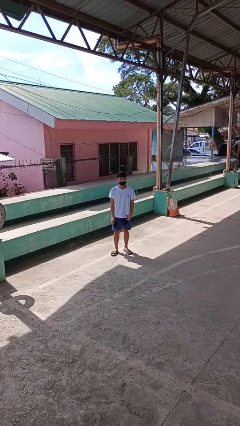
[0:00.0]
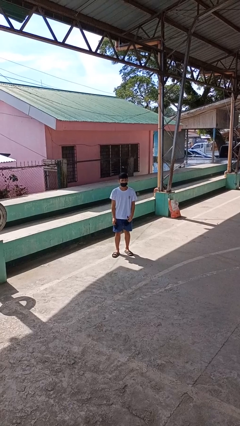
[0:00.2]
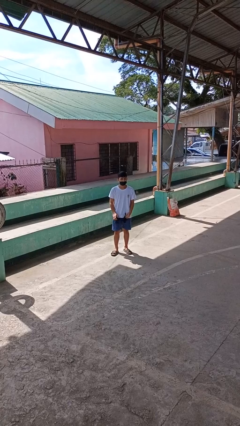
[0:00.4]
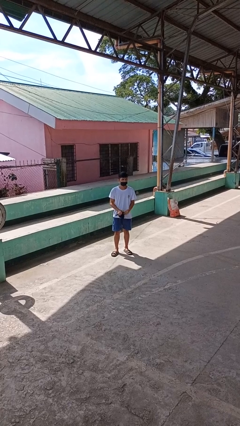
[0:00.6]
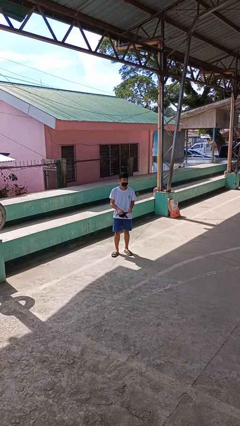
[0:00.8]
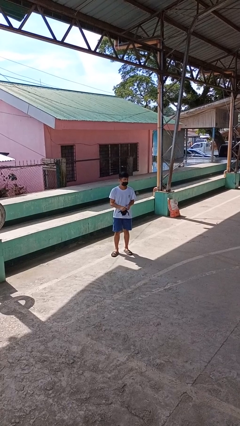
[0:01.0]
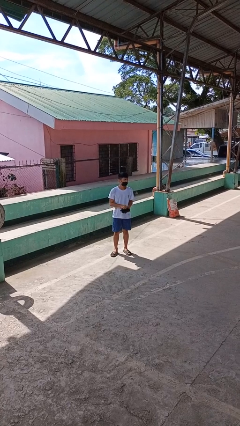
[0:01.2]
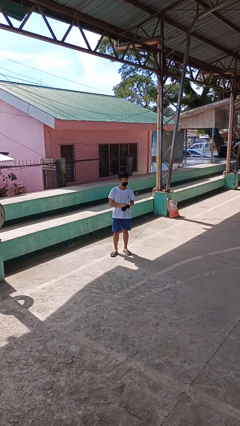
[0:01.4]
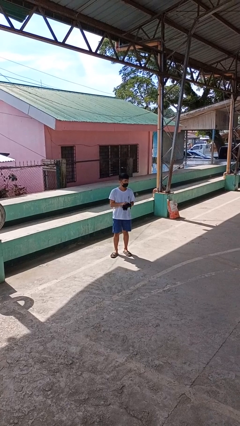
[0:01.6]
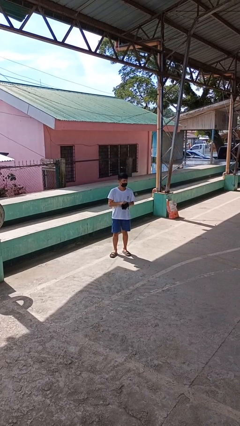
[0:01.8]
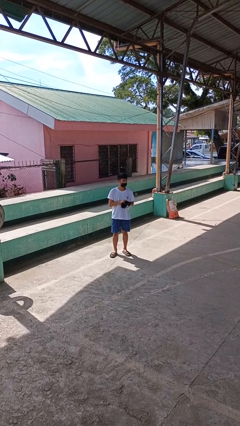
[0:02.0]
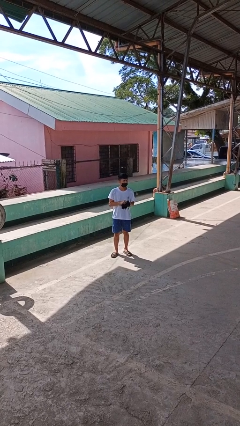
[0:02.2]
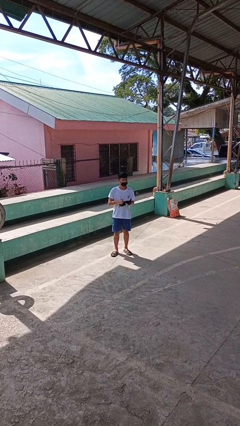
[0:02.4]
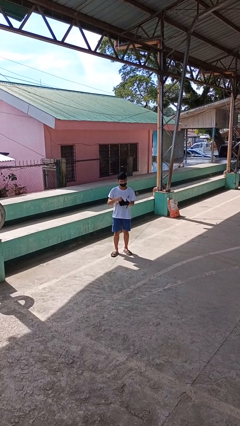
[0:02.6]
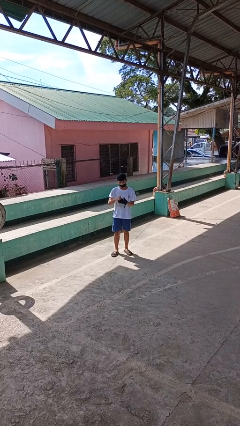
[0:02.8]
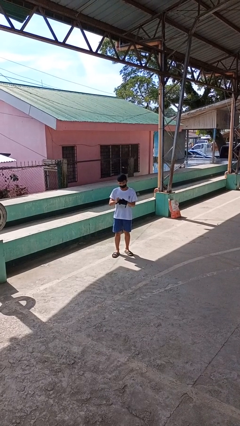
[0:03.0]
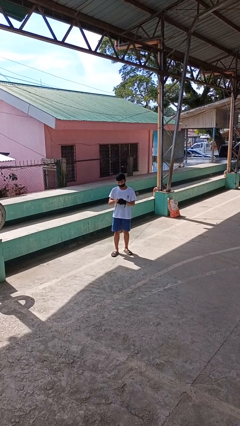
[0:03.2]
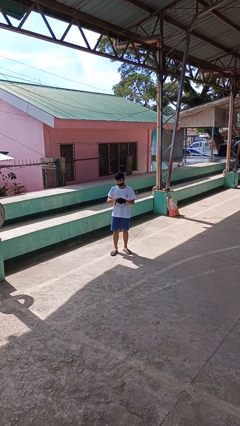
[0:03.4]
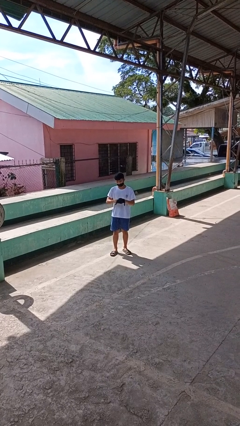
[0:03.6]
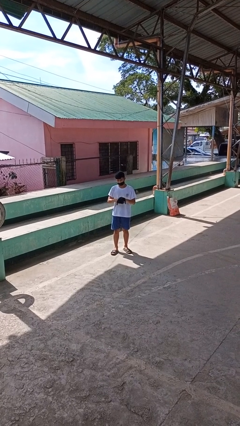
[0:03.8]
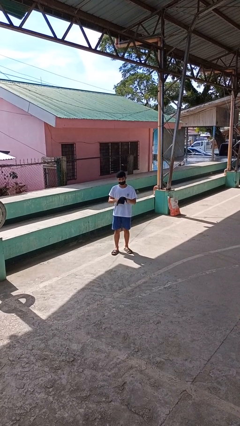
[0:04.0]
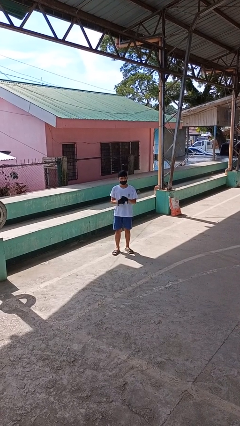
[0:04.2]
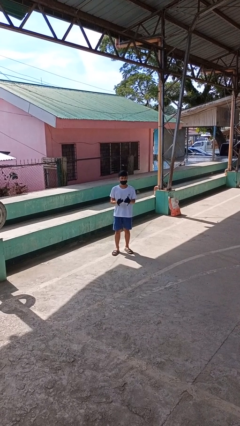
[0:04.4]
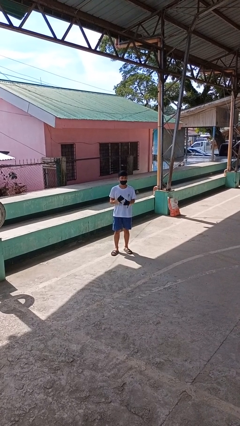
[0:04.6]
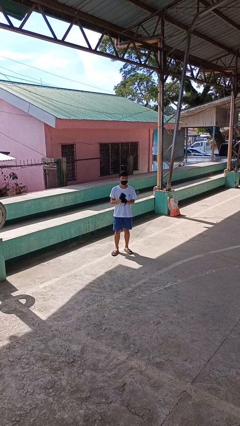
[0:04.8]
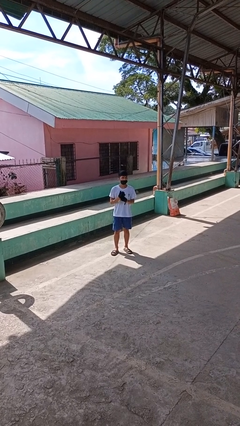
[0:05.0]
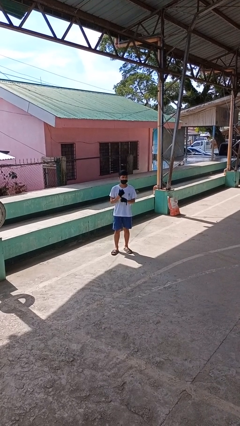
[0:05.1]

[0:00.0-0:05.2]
person puts on gloves

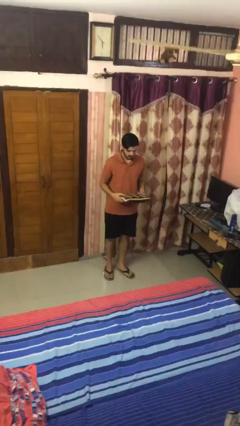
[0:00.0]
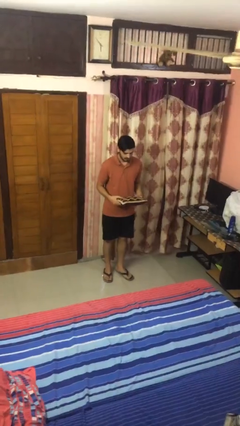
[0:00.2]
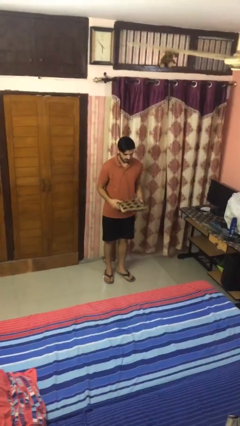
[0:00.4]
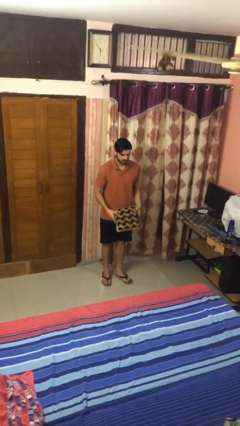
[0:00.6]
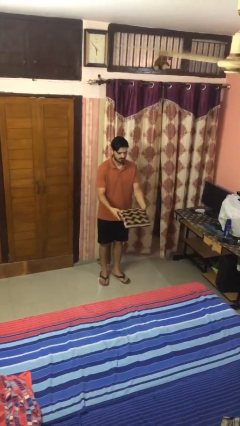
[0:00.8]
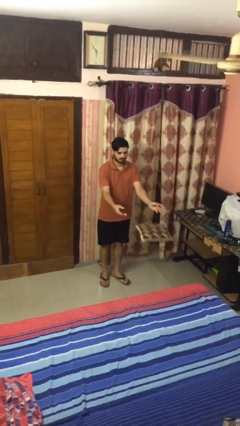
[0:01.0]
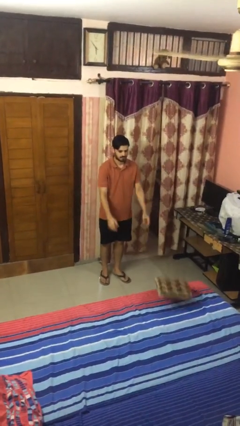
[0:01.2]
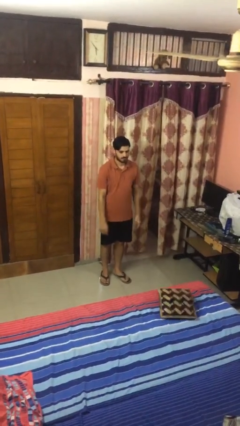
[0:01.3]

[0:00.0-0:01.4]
person throws object on bed

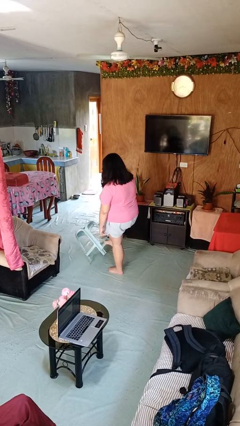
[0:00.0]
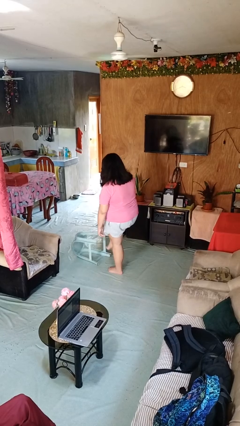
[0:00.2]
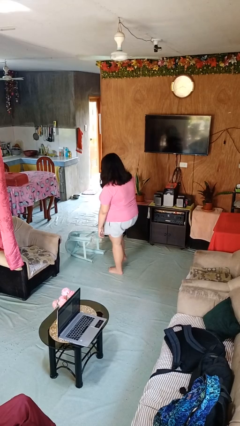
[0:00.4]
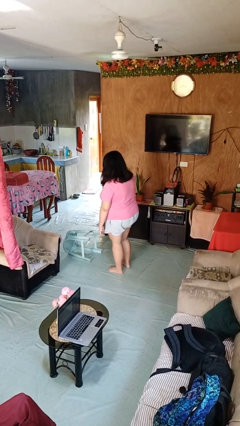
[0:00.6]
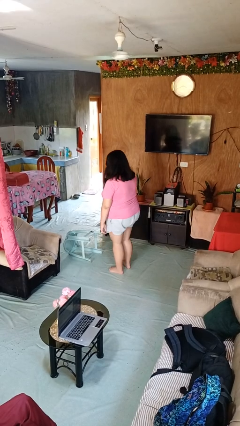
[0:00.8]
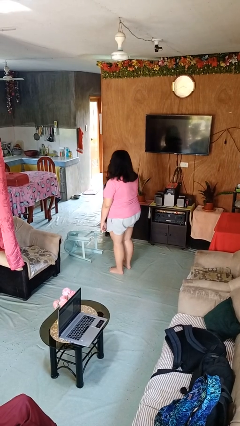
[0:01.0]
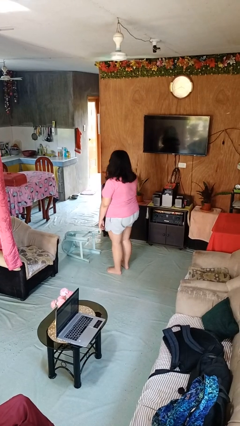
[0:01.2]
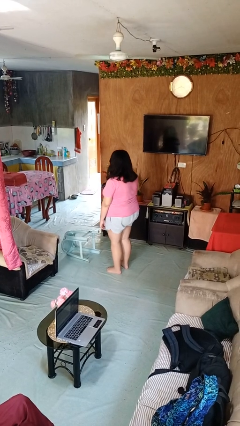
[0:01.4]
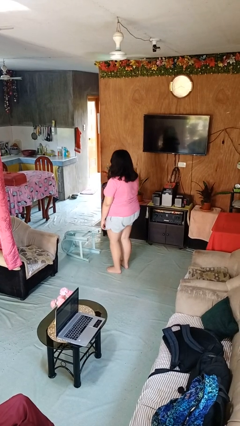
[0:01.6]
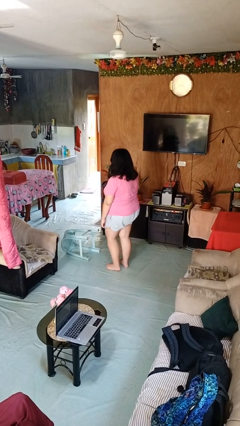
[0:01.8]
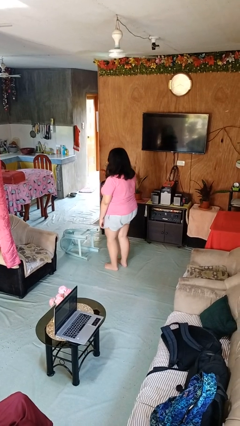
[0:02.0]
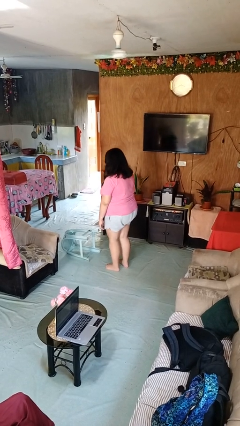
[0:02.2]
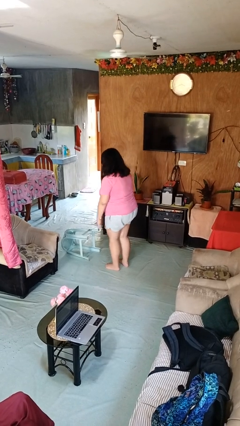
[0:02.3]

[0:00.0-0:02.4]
person knocks over furniture

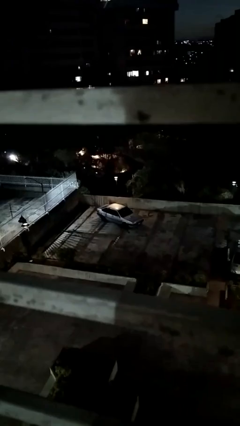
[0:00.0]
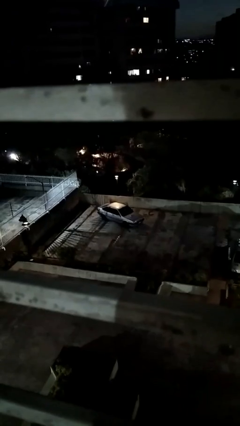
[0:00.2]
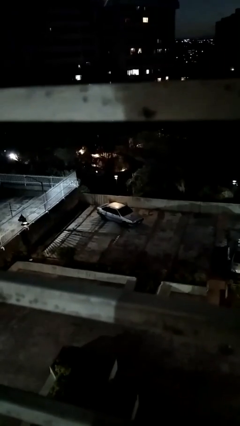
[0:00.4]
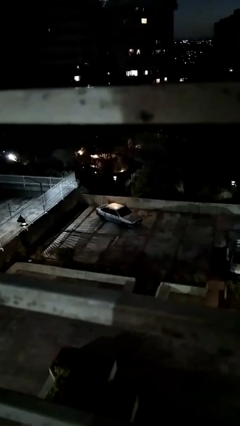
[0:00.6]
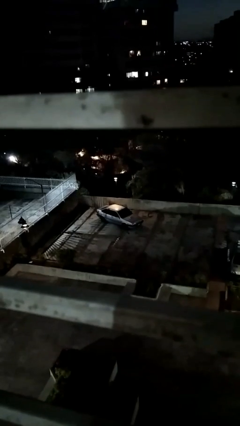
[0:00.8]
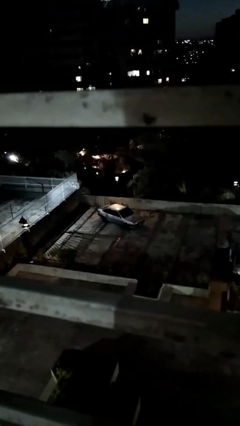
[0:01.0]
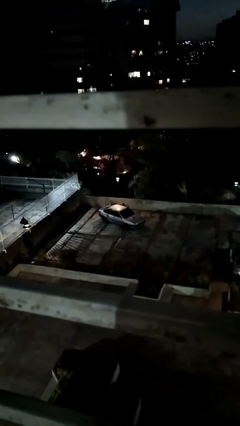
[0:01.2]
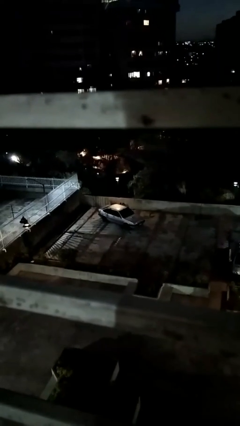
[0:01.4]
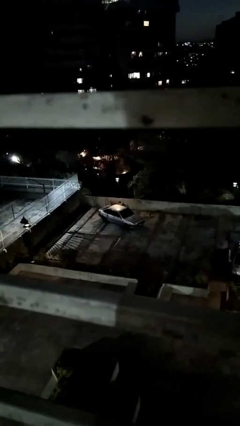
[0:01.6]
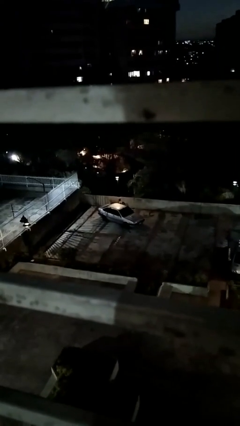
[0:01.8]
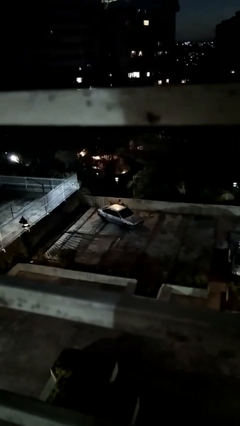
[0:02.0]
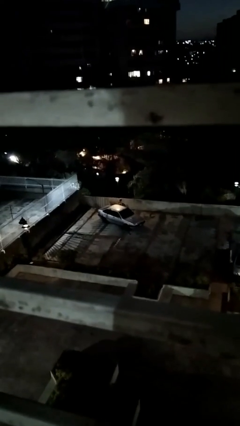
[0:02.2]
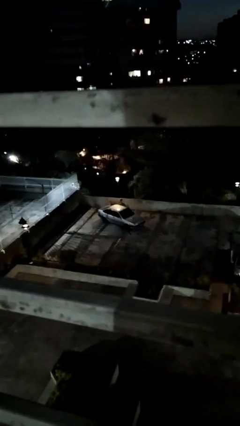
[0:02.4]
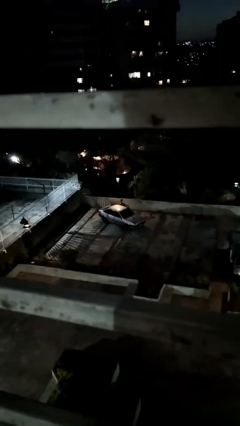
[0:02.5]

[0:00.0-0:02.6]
car drops off person

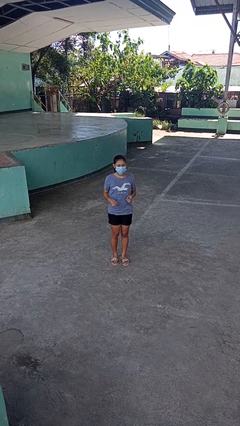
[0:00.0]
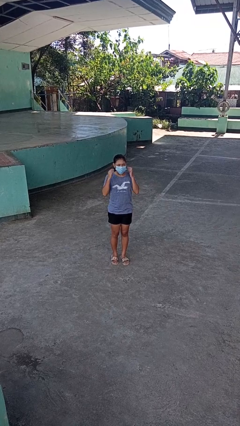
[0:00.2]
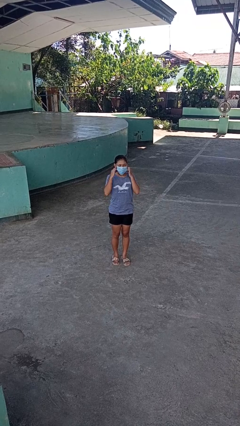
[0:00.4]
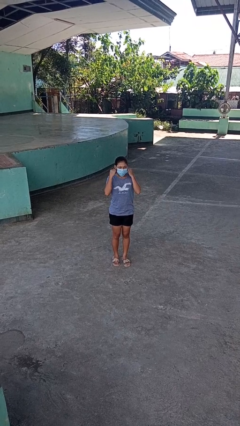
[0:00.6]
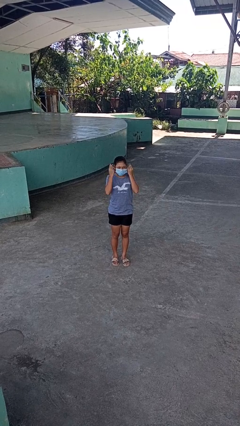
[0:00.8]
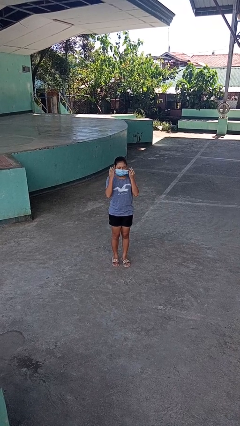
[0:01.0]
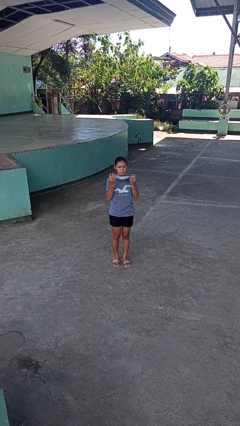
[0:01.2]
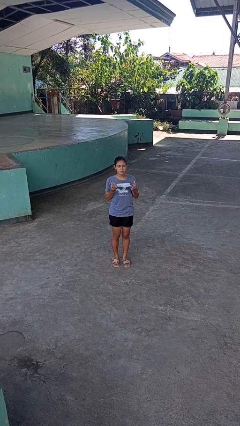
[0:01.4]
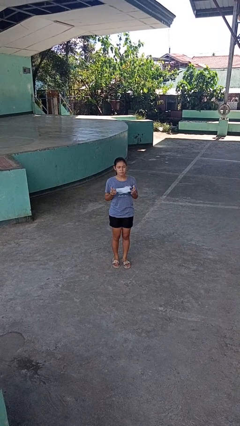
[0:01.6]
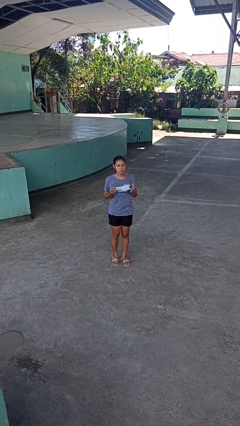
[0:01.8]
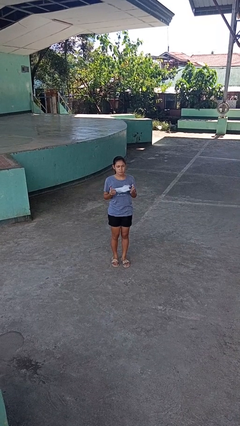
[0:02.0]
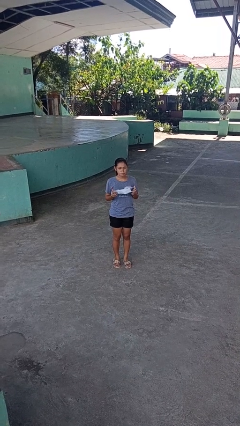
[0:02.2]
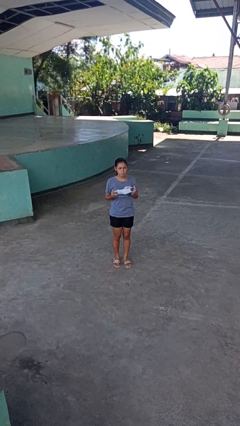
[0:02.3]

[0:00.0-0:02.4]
person takes off facemask

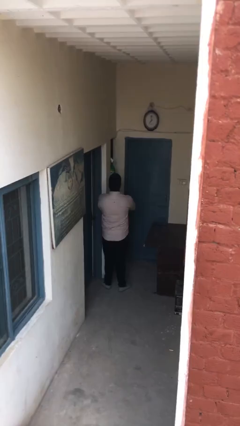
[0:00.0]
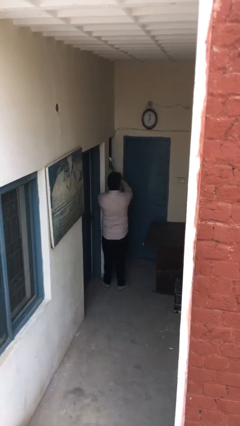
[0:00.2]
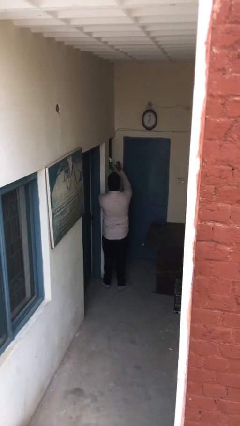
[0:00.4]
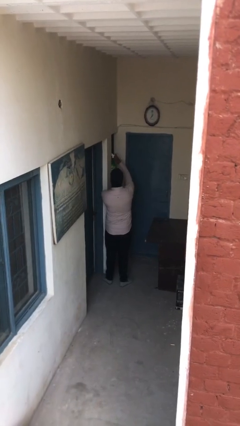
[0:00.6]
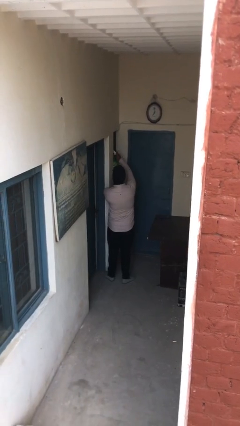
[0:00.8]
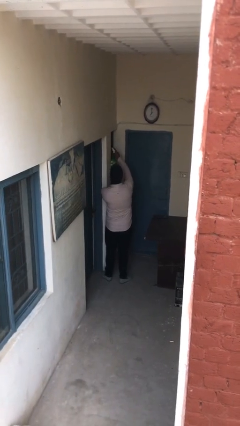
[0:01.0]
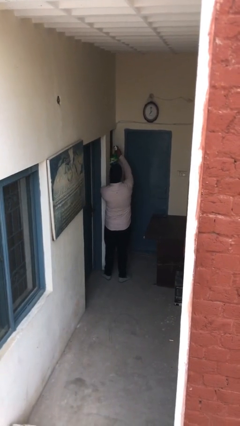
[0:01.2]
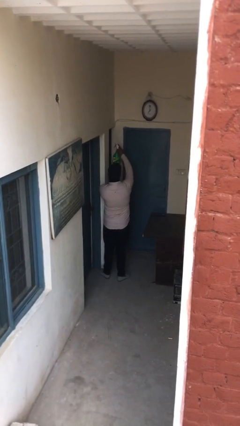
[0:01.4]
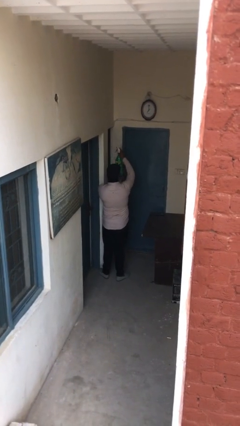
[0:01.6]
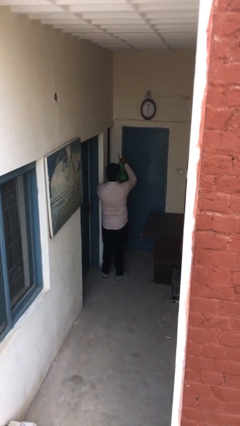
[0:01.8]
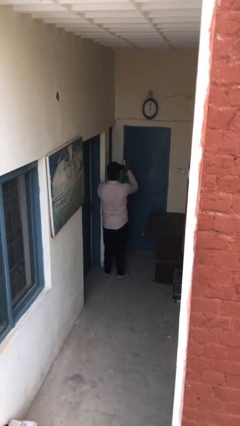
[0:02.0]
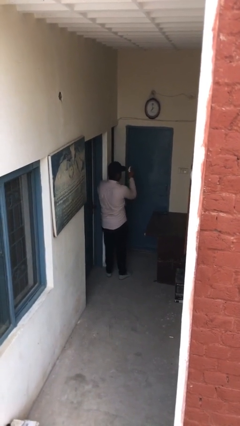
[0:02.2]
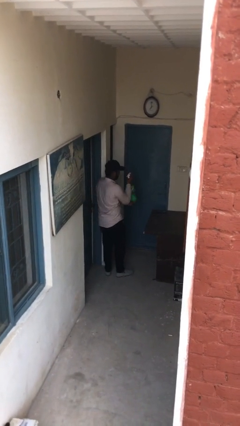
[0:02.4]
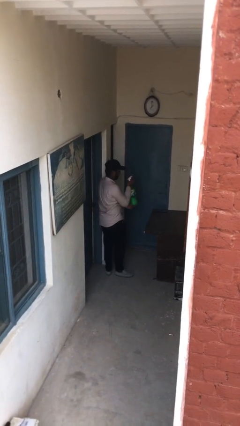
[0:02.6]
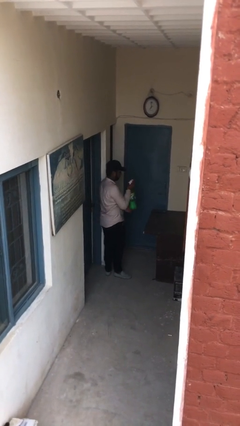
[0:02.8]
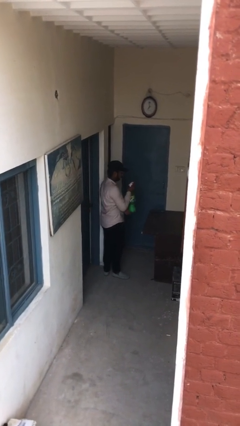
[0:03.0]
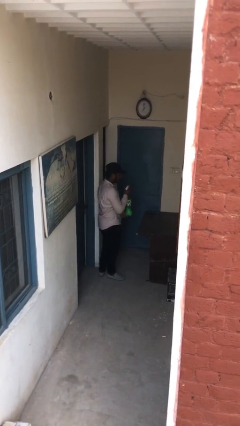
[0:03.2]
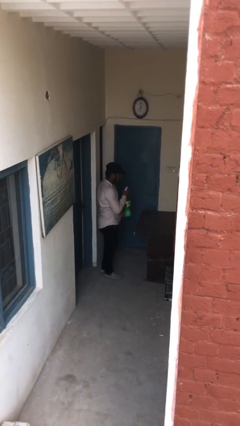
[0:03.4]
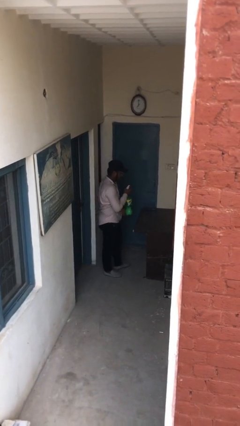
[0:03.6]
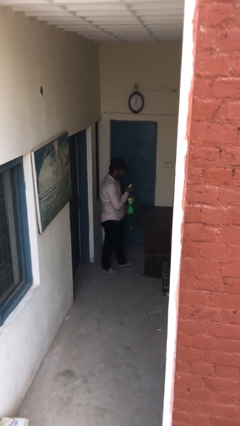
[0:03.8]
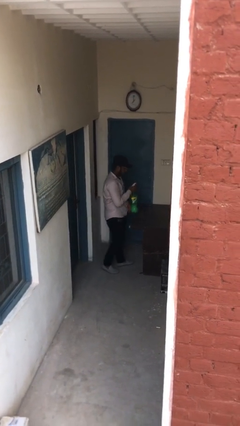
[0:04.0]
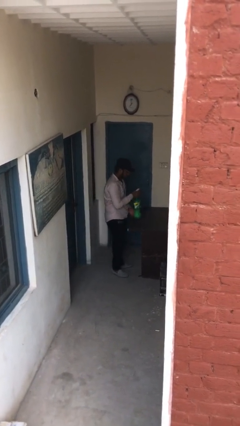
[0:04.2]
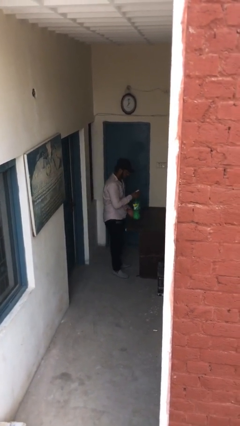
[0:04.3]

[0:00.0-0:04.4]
person picks up object from shelf
